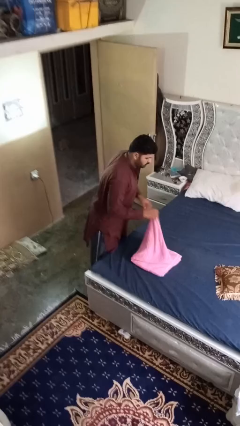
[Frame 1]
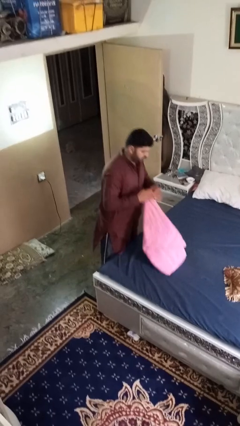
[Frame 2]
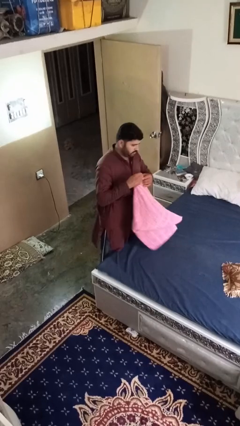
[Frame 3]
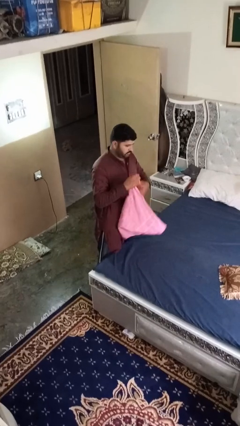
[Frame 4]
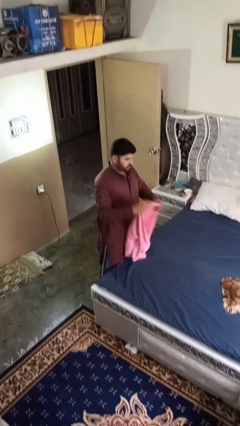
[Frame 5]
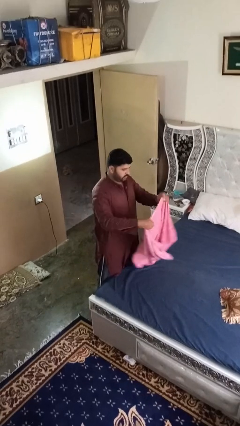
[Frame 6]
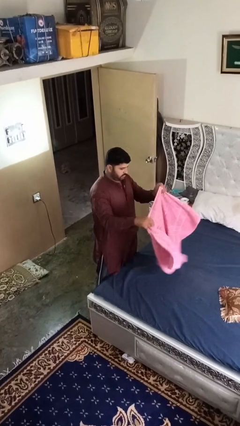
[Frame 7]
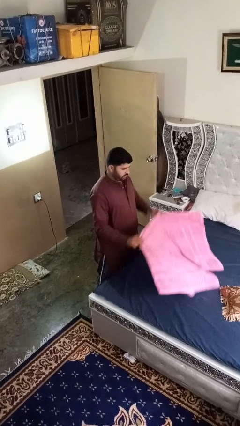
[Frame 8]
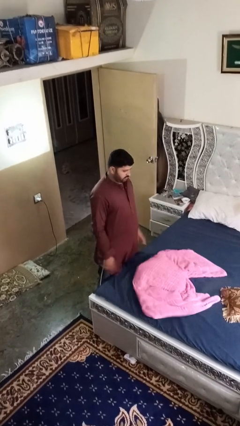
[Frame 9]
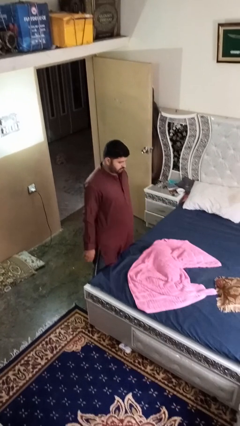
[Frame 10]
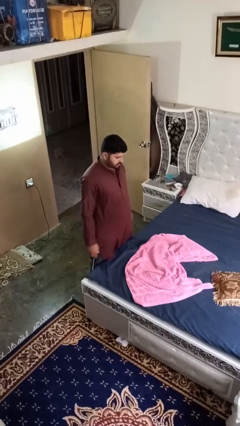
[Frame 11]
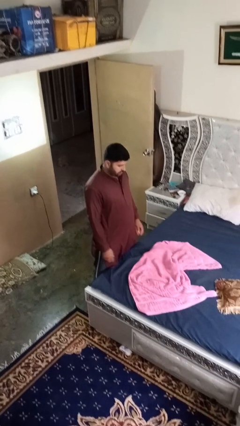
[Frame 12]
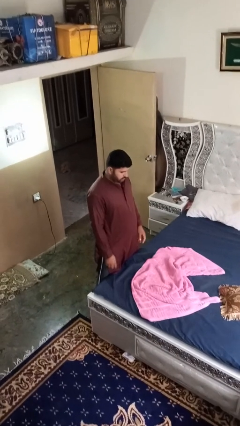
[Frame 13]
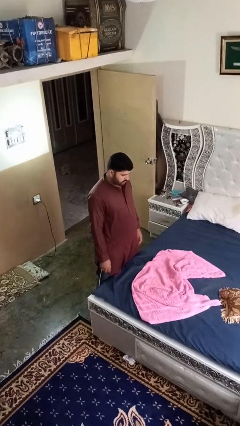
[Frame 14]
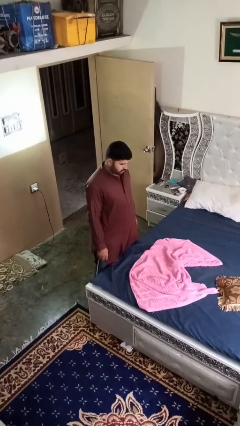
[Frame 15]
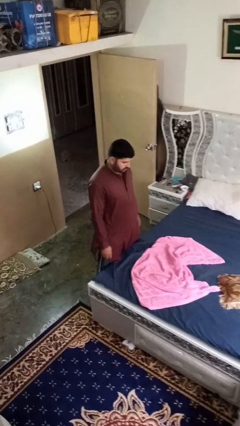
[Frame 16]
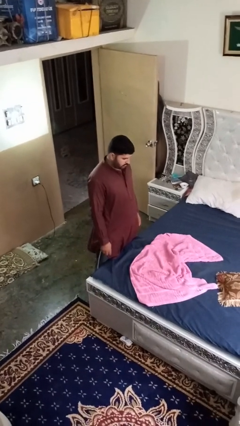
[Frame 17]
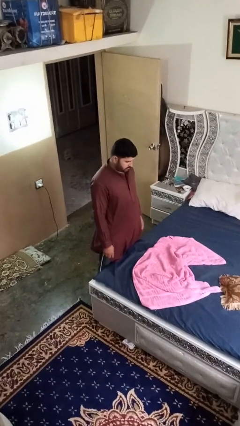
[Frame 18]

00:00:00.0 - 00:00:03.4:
person folds towel

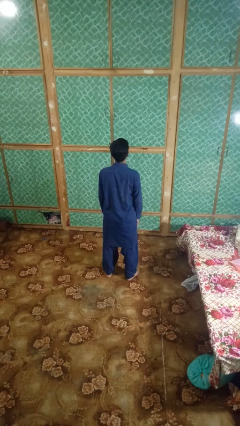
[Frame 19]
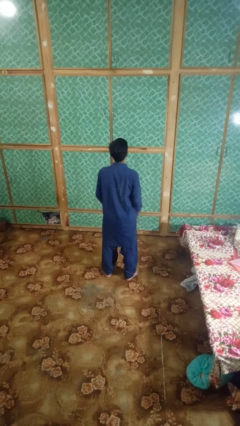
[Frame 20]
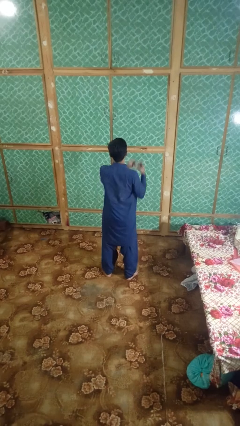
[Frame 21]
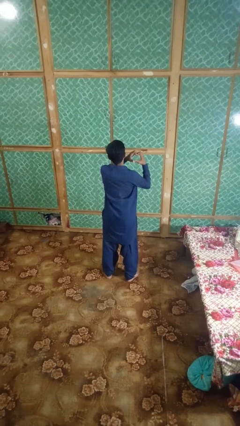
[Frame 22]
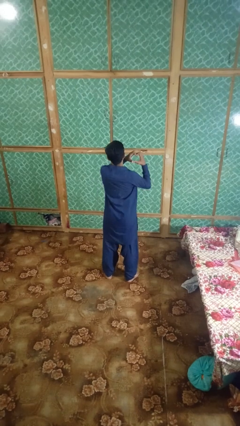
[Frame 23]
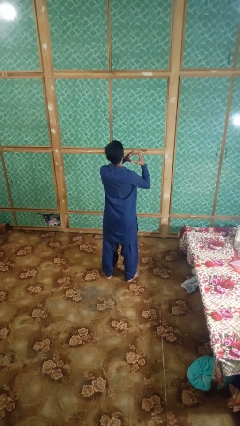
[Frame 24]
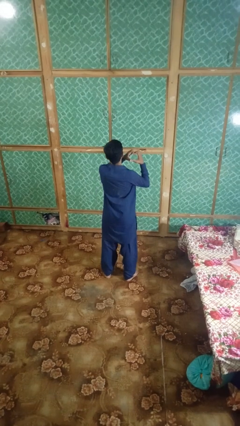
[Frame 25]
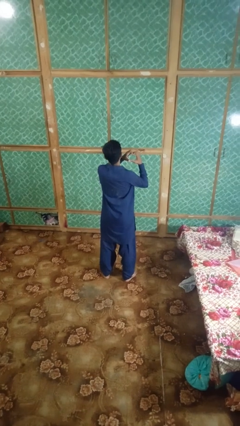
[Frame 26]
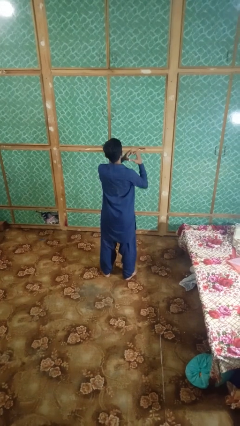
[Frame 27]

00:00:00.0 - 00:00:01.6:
person gestures heart

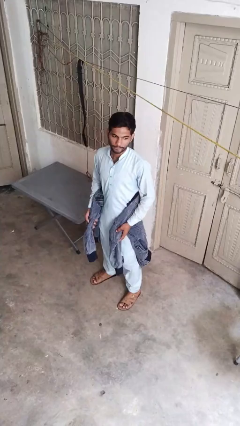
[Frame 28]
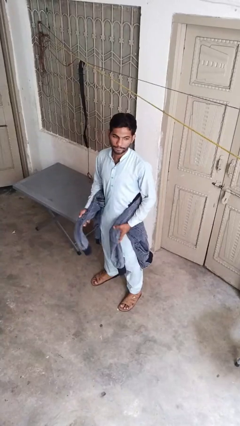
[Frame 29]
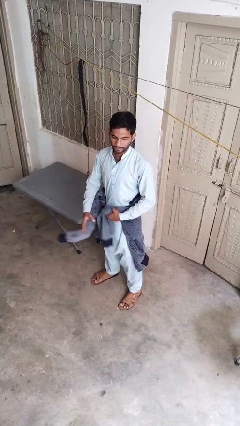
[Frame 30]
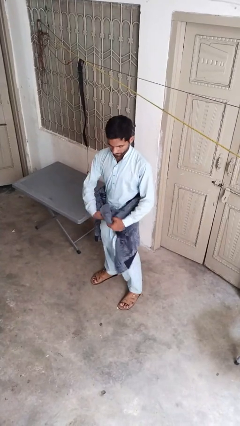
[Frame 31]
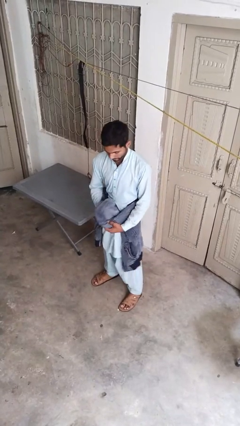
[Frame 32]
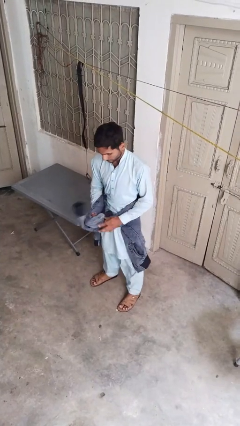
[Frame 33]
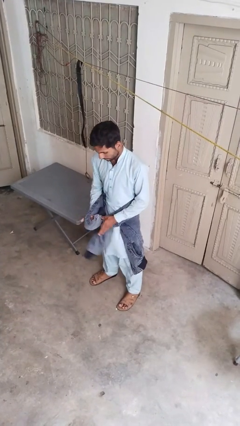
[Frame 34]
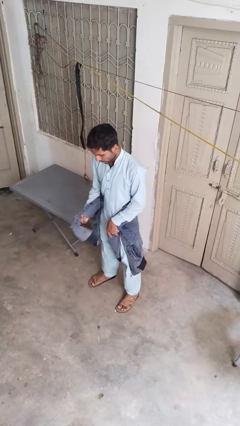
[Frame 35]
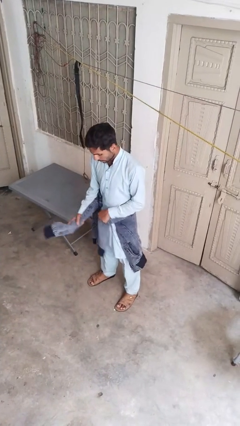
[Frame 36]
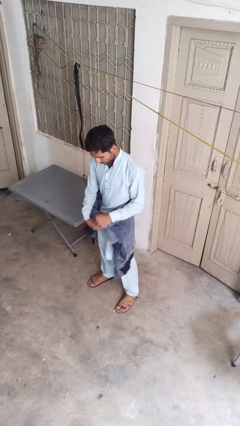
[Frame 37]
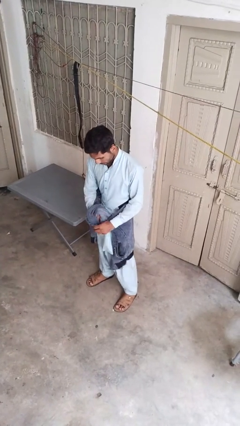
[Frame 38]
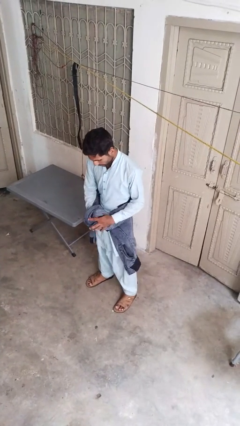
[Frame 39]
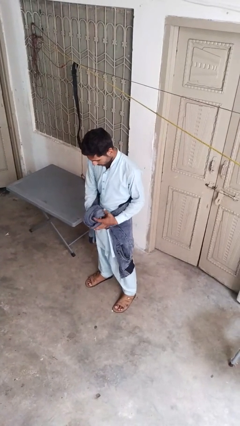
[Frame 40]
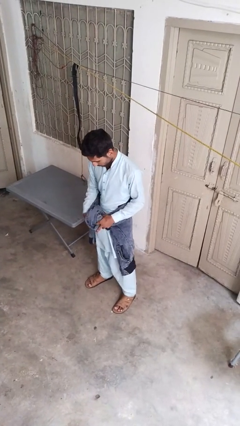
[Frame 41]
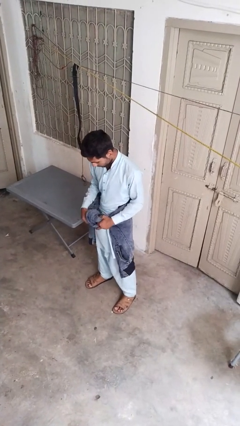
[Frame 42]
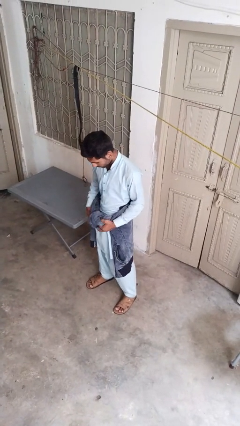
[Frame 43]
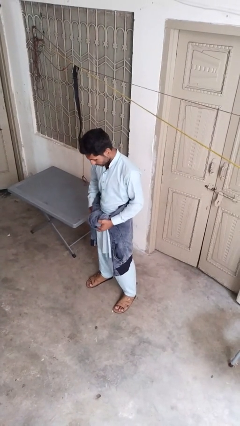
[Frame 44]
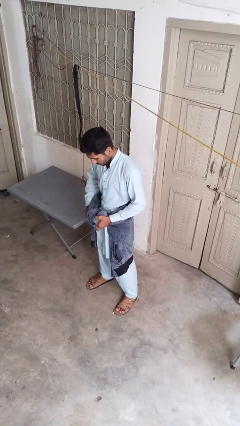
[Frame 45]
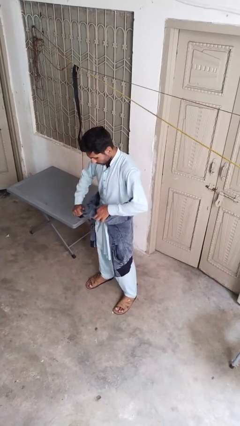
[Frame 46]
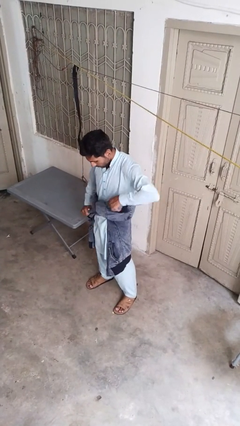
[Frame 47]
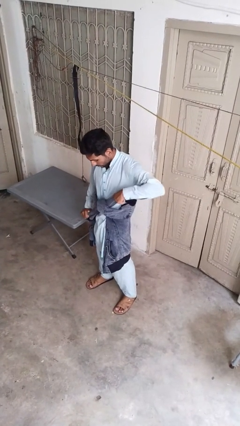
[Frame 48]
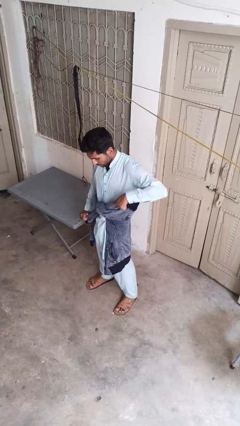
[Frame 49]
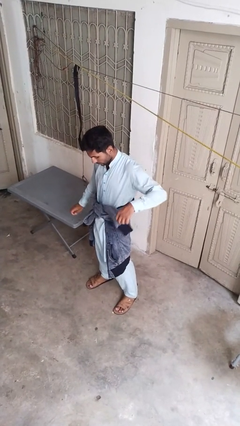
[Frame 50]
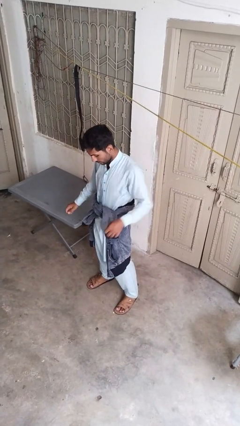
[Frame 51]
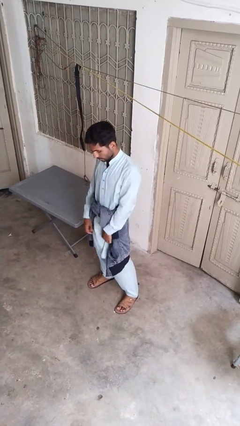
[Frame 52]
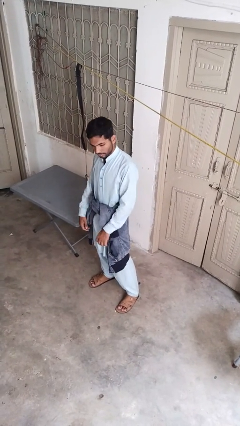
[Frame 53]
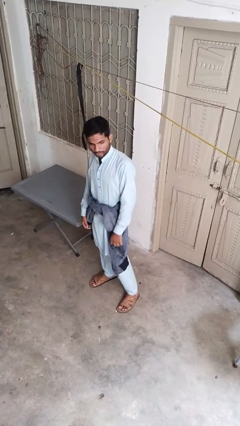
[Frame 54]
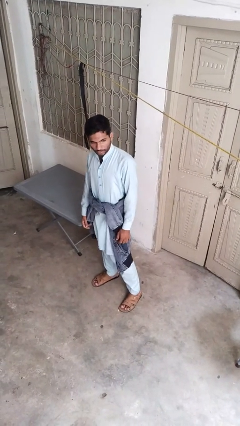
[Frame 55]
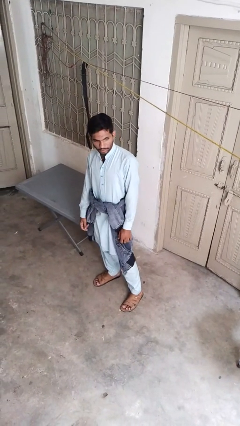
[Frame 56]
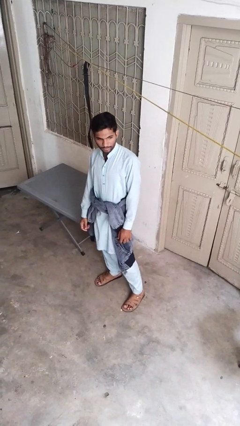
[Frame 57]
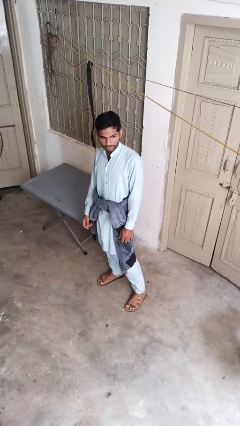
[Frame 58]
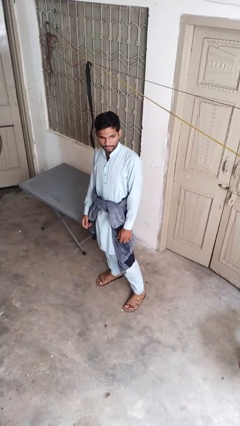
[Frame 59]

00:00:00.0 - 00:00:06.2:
person ties jacket around waist

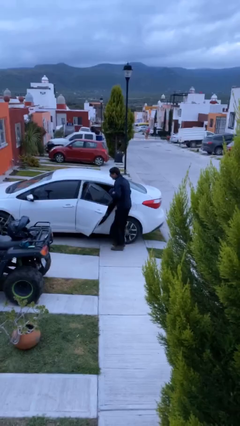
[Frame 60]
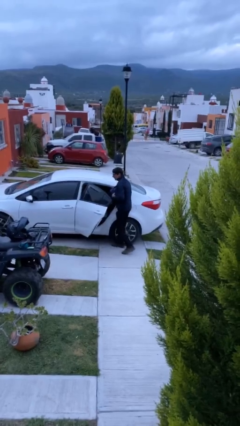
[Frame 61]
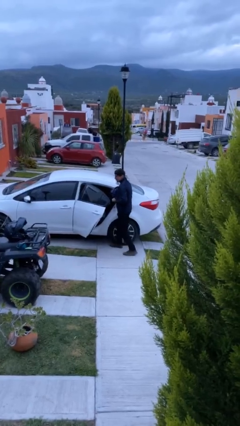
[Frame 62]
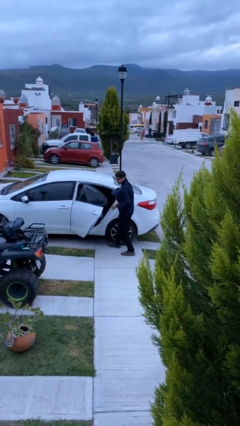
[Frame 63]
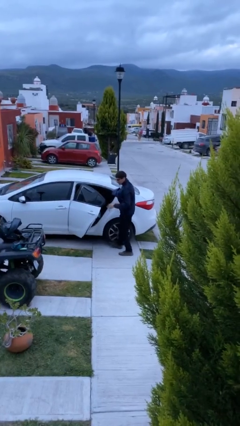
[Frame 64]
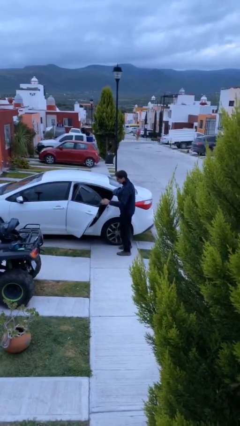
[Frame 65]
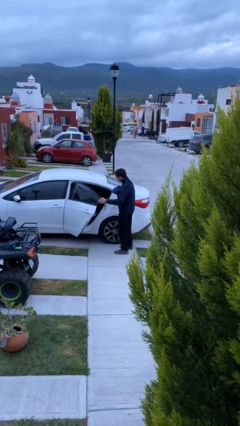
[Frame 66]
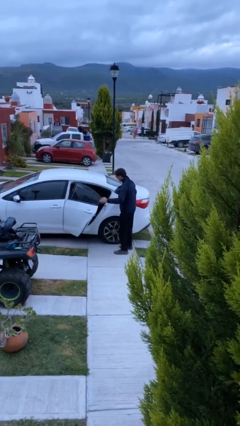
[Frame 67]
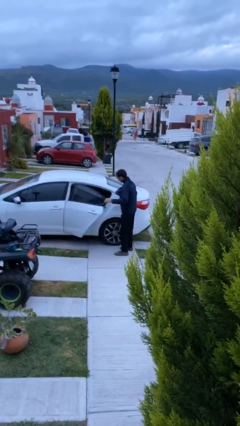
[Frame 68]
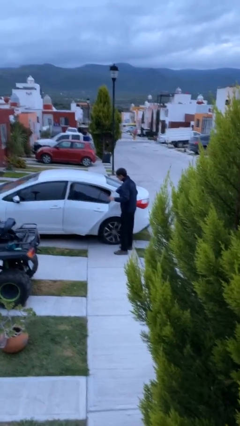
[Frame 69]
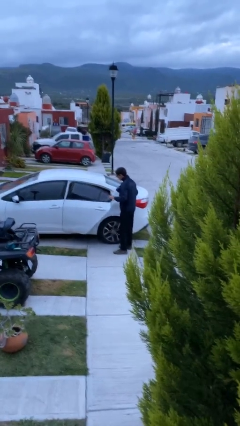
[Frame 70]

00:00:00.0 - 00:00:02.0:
person unloads car

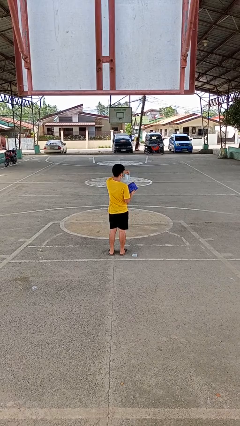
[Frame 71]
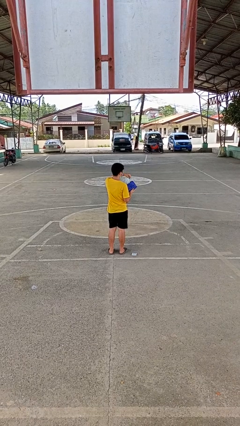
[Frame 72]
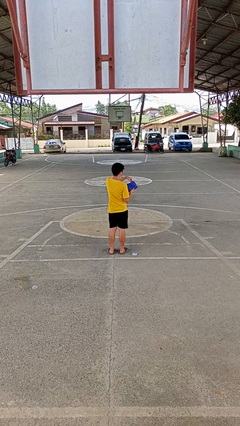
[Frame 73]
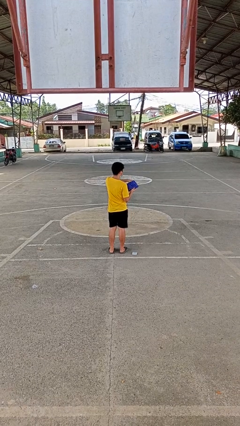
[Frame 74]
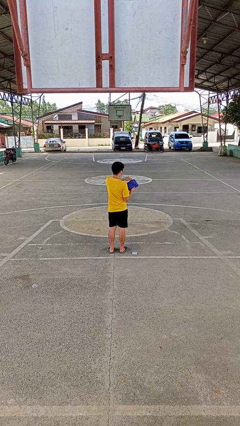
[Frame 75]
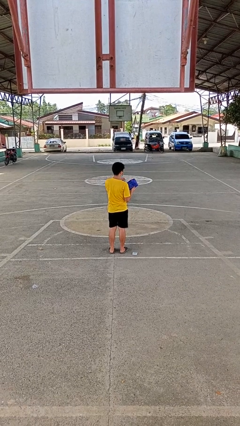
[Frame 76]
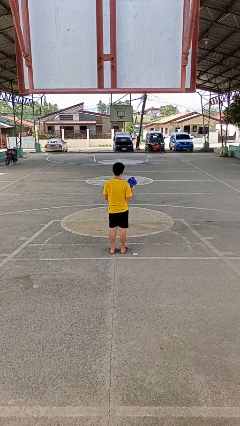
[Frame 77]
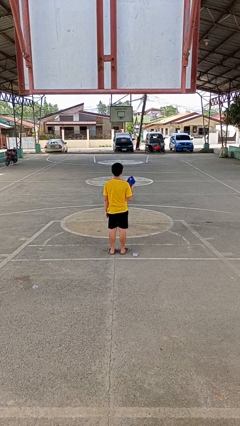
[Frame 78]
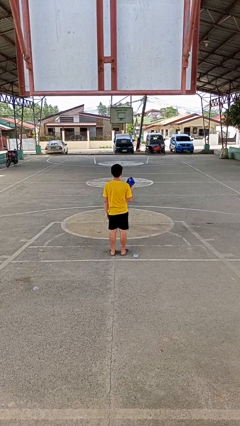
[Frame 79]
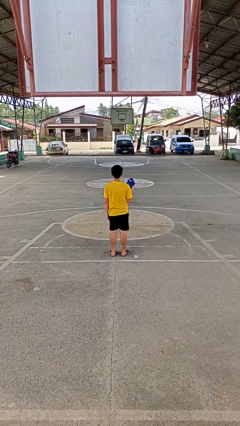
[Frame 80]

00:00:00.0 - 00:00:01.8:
person puts object into purse

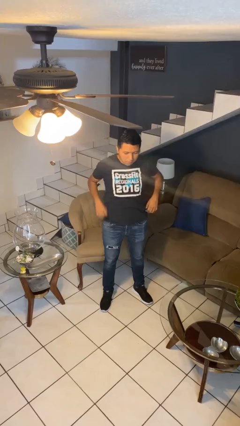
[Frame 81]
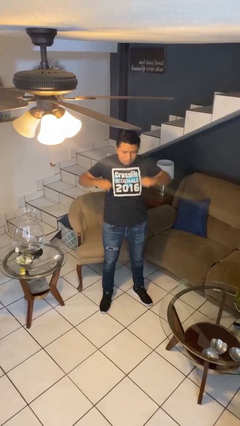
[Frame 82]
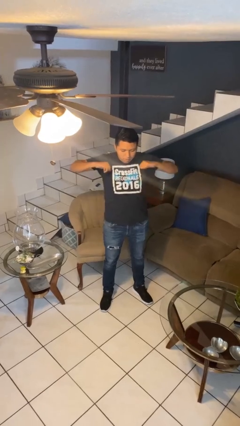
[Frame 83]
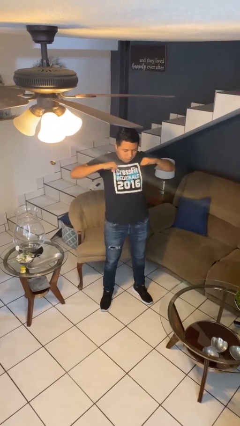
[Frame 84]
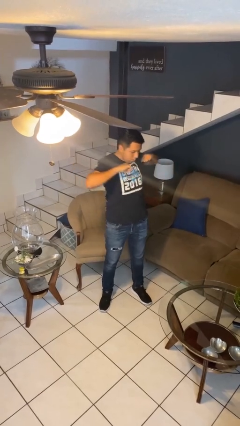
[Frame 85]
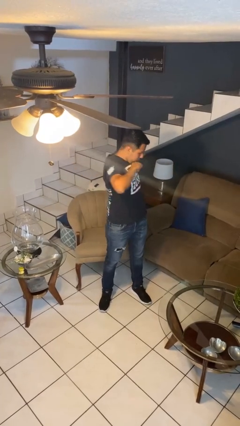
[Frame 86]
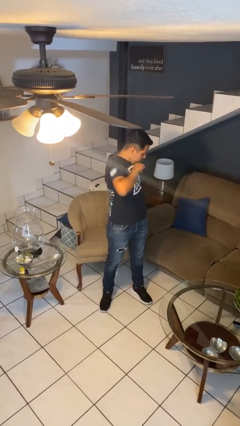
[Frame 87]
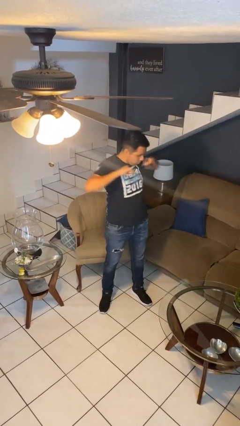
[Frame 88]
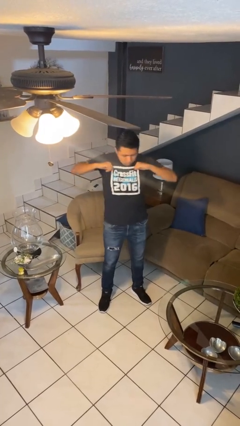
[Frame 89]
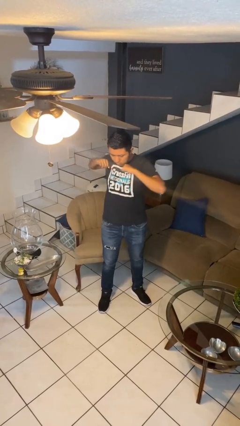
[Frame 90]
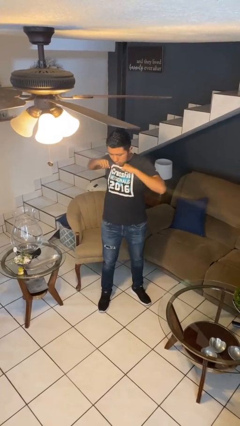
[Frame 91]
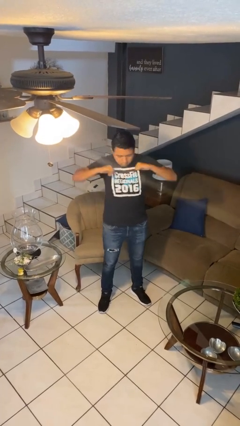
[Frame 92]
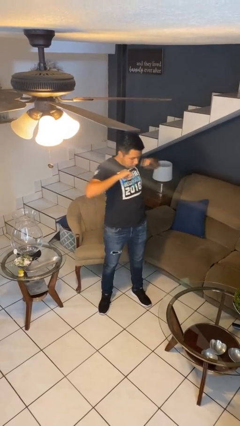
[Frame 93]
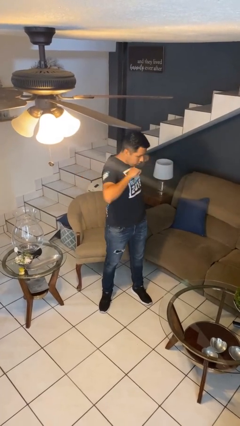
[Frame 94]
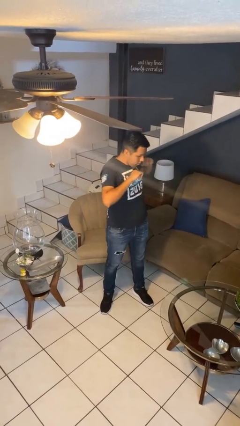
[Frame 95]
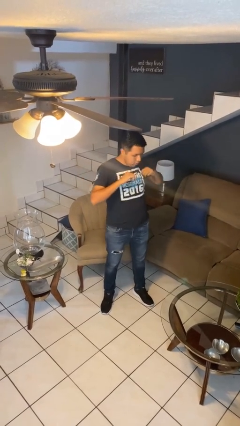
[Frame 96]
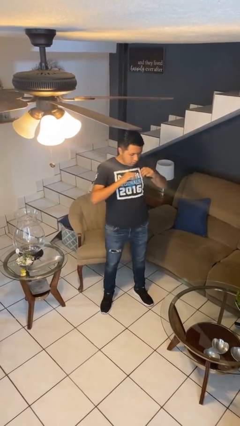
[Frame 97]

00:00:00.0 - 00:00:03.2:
person stretches arms to side
